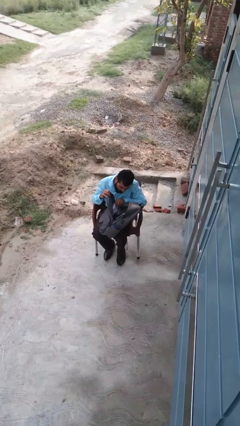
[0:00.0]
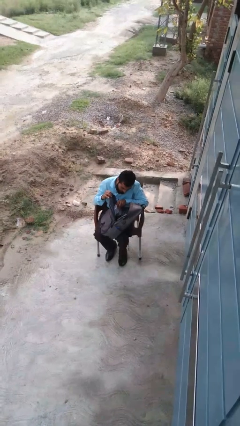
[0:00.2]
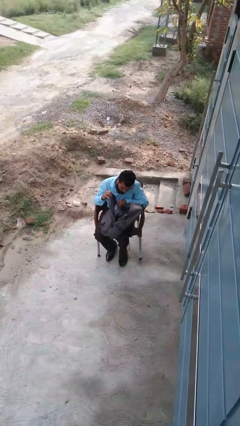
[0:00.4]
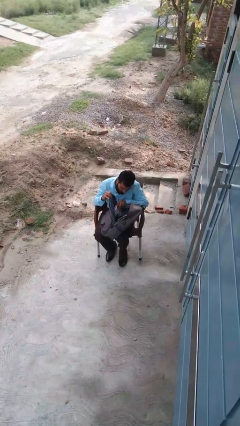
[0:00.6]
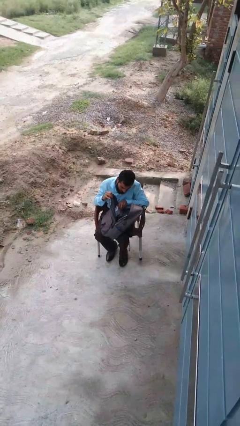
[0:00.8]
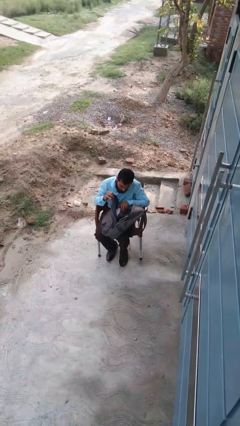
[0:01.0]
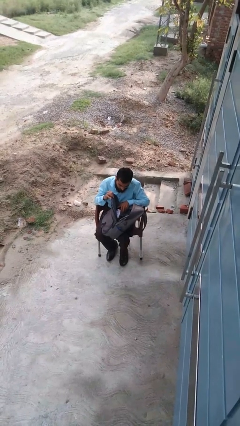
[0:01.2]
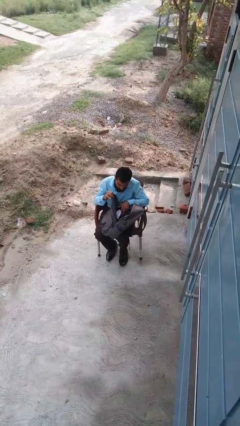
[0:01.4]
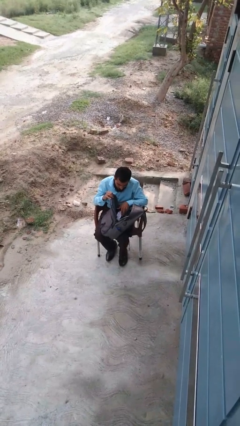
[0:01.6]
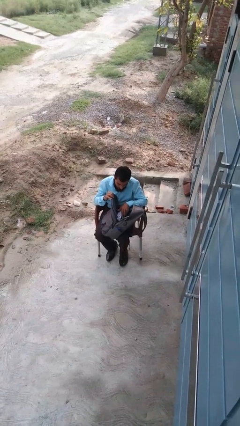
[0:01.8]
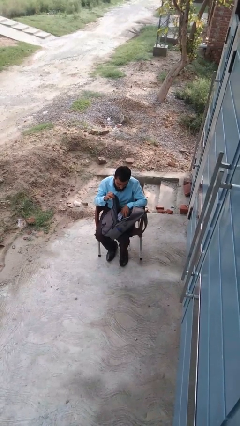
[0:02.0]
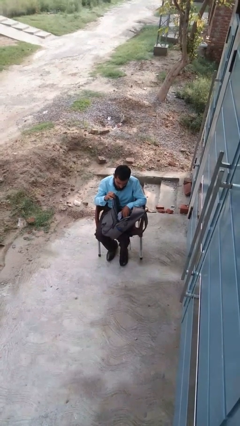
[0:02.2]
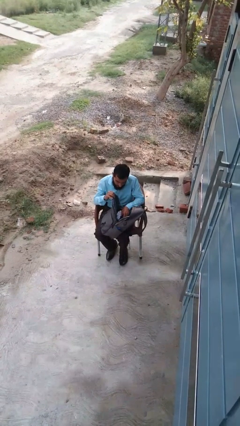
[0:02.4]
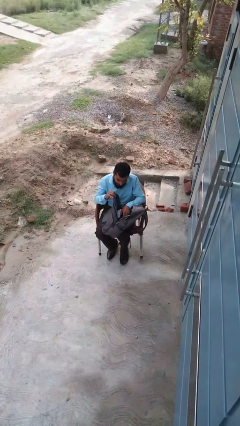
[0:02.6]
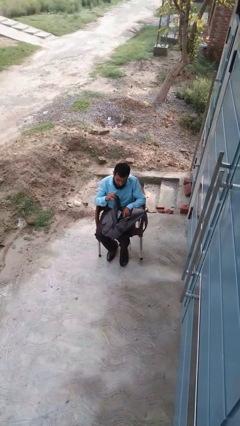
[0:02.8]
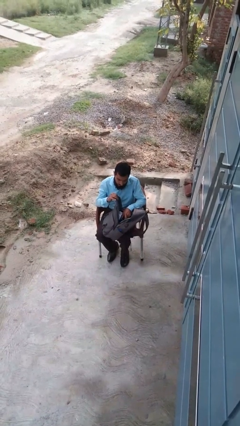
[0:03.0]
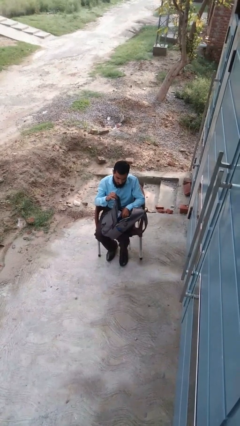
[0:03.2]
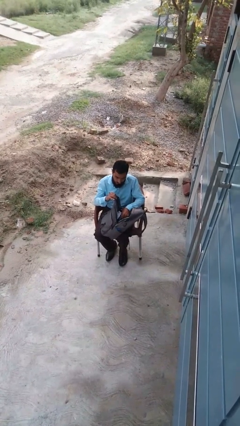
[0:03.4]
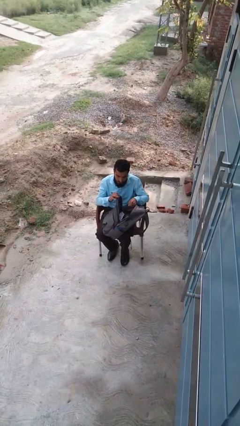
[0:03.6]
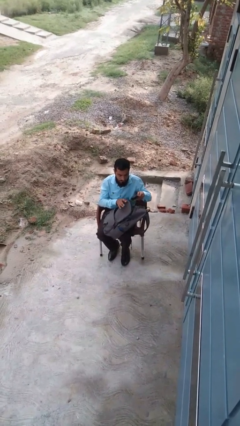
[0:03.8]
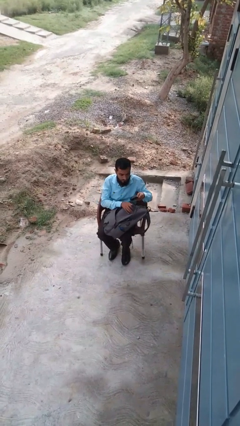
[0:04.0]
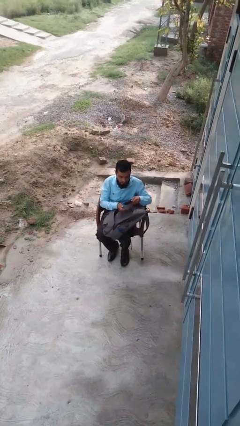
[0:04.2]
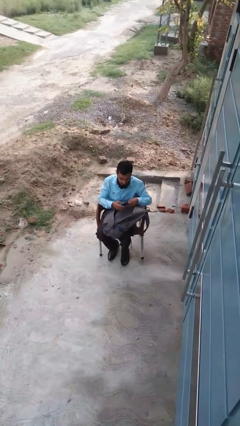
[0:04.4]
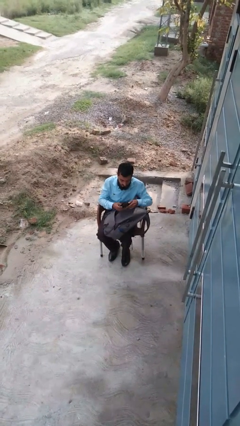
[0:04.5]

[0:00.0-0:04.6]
person takes object from backpack

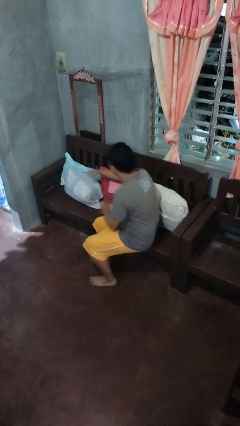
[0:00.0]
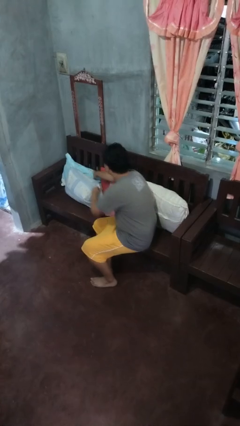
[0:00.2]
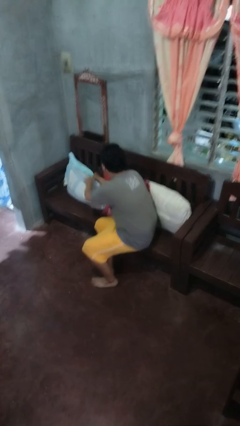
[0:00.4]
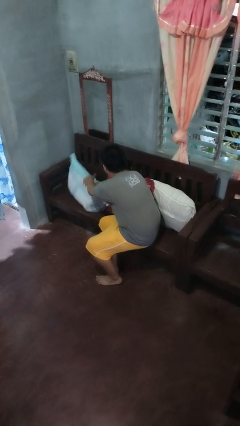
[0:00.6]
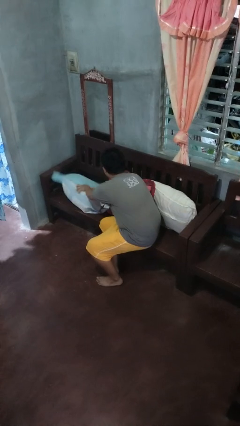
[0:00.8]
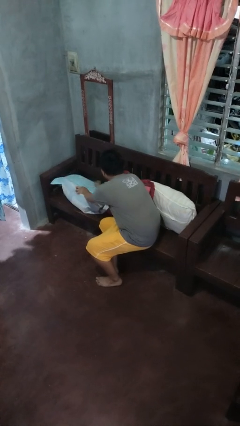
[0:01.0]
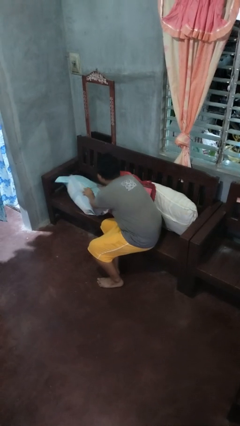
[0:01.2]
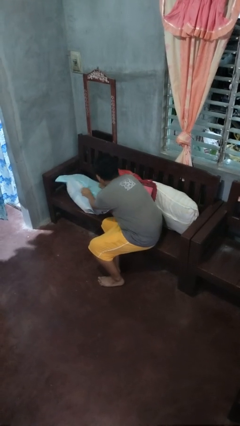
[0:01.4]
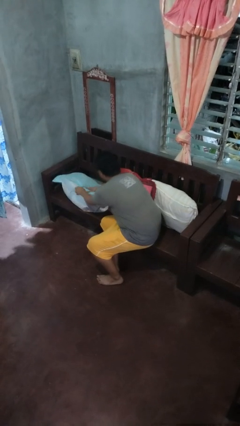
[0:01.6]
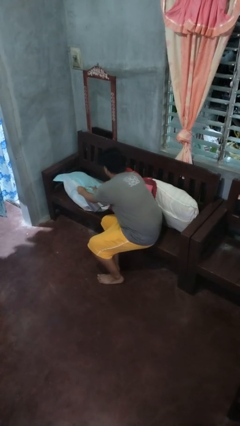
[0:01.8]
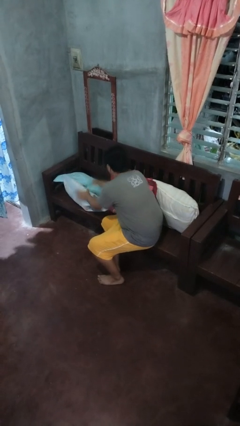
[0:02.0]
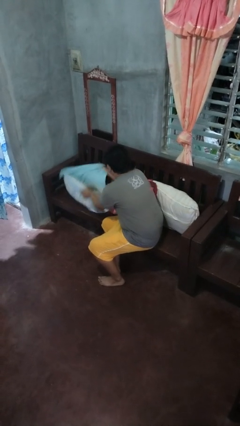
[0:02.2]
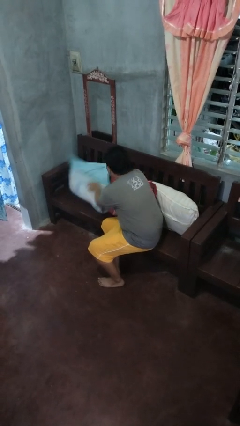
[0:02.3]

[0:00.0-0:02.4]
person searches in couch

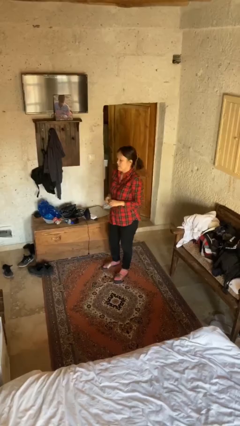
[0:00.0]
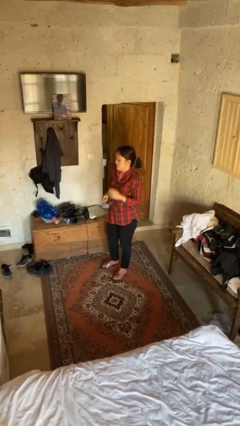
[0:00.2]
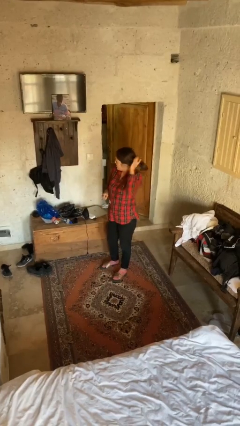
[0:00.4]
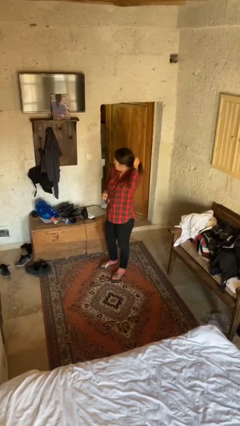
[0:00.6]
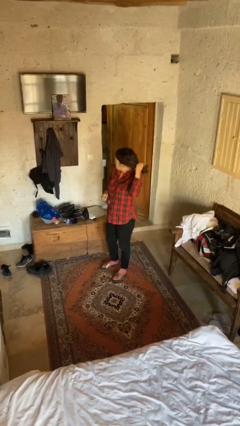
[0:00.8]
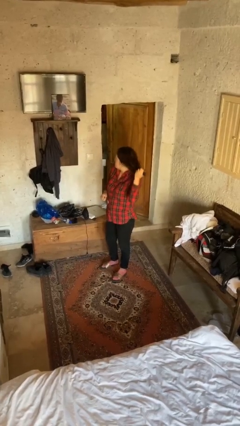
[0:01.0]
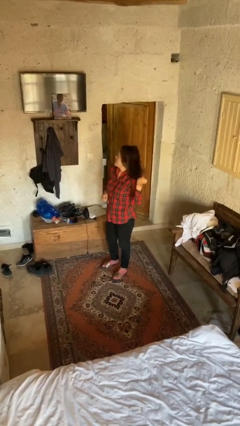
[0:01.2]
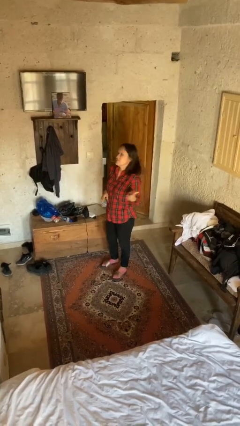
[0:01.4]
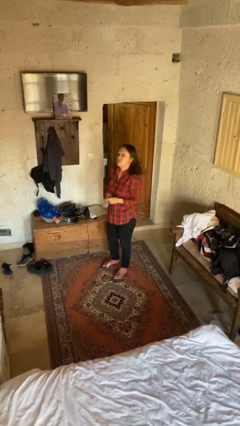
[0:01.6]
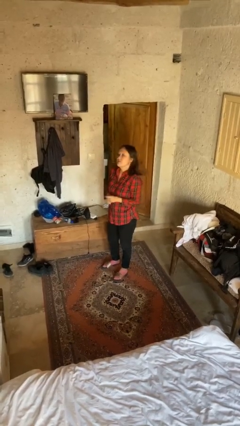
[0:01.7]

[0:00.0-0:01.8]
person takes off hairtie

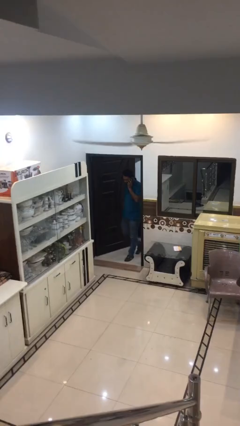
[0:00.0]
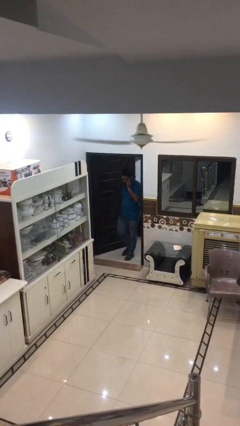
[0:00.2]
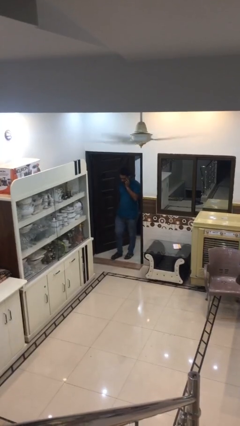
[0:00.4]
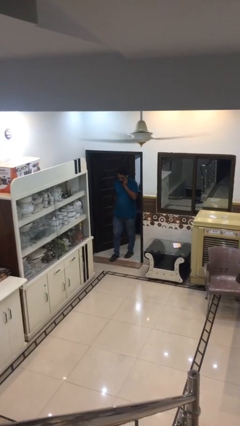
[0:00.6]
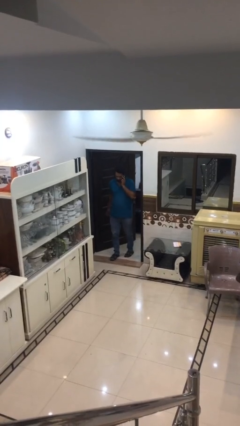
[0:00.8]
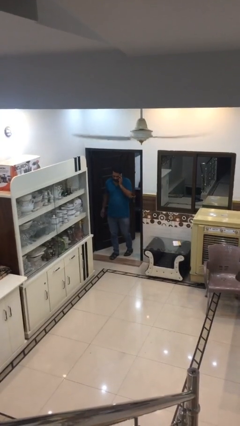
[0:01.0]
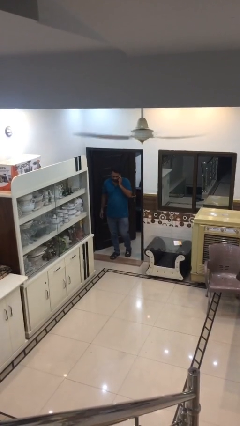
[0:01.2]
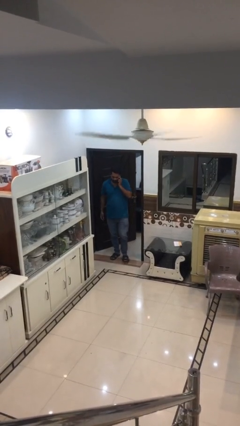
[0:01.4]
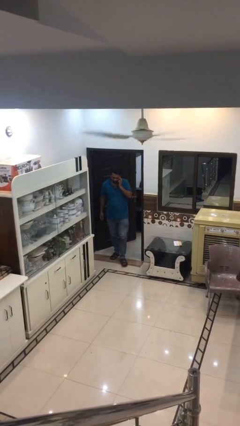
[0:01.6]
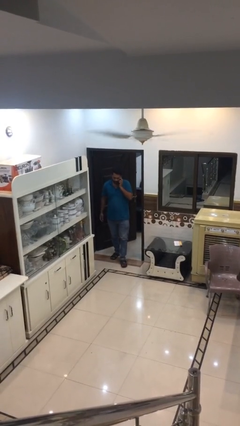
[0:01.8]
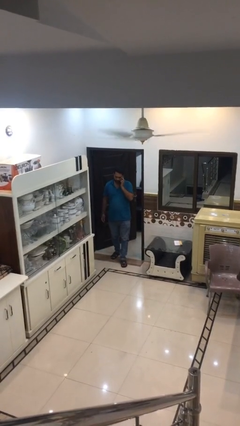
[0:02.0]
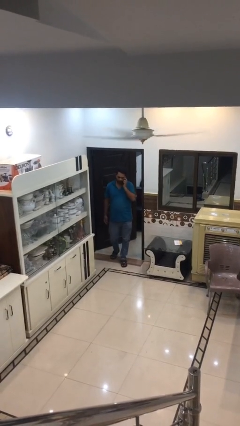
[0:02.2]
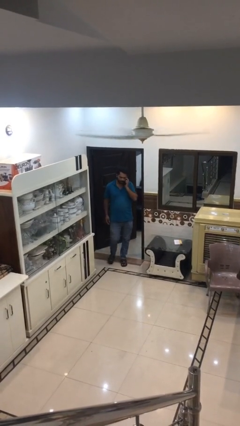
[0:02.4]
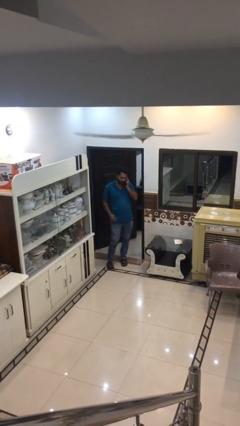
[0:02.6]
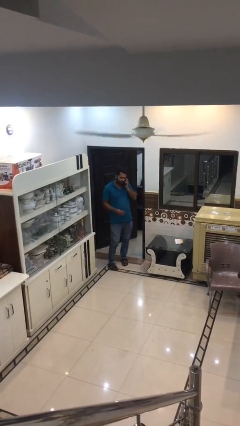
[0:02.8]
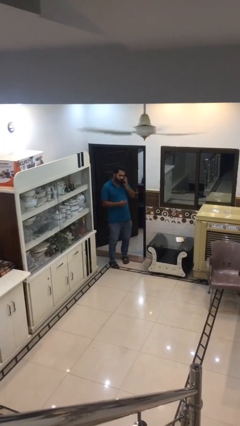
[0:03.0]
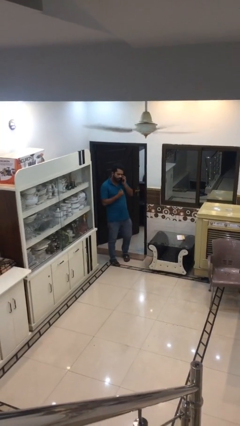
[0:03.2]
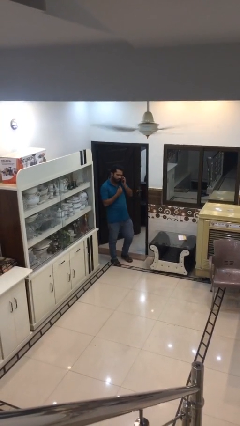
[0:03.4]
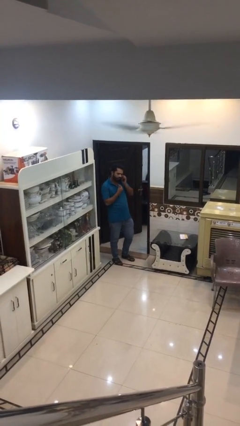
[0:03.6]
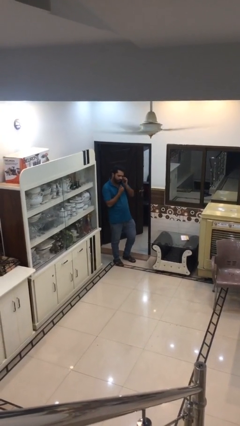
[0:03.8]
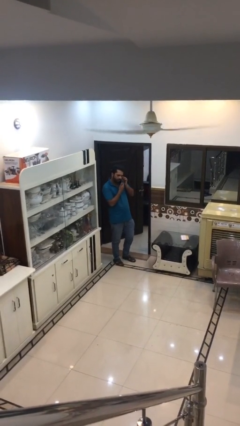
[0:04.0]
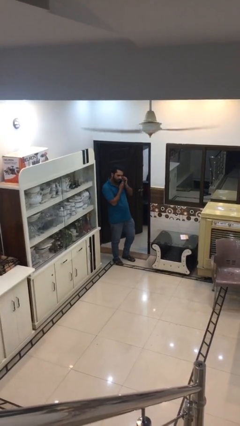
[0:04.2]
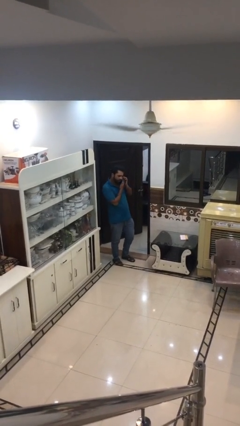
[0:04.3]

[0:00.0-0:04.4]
person enters scene through structure

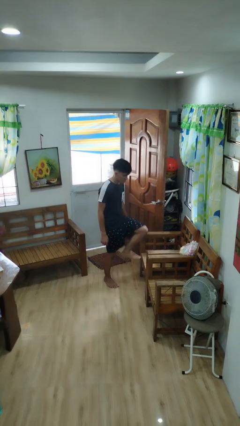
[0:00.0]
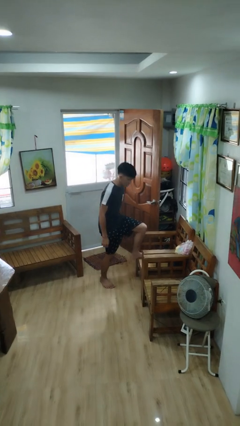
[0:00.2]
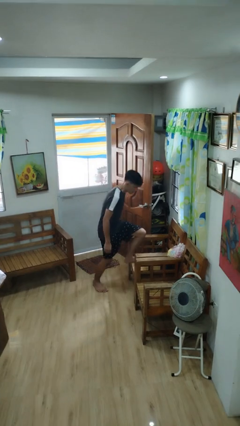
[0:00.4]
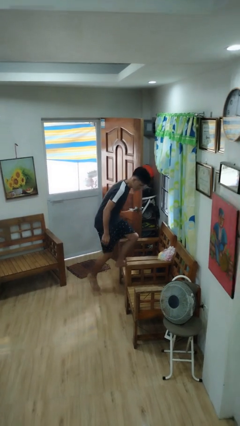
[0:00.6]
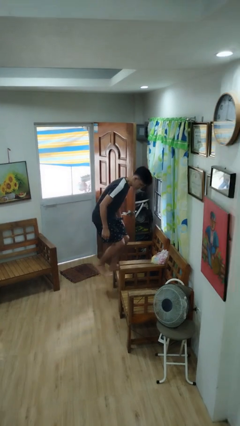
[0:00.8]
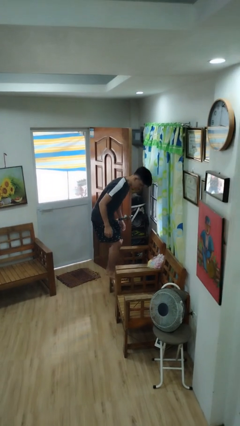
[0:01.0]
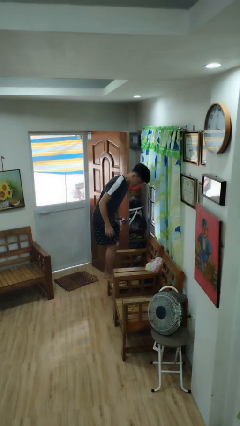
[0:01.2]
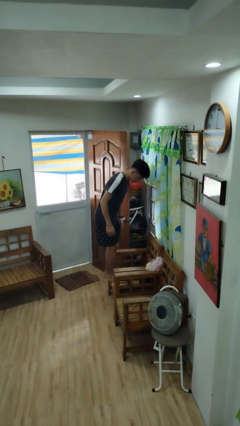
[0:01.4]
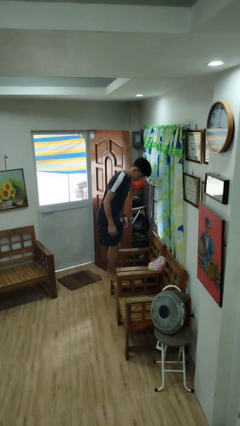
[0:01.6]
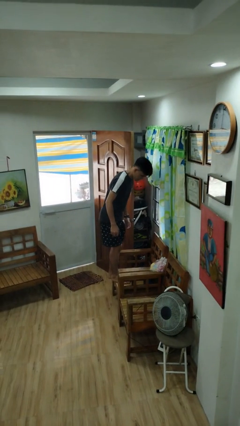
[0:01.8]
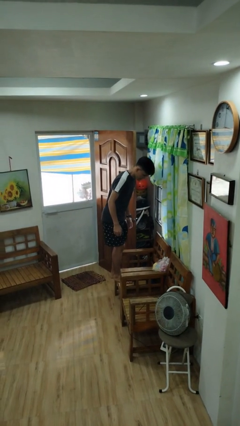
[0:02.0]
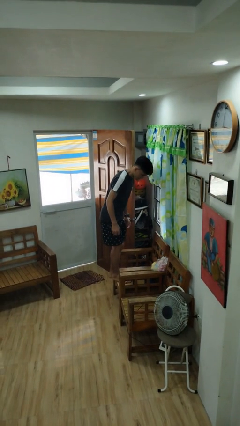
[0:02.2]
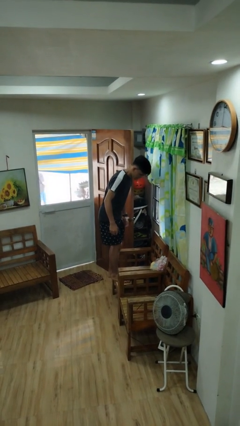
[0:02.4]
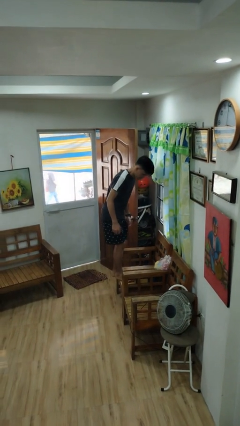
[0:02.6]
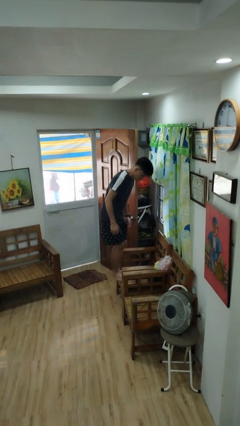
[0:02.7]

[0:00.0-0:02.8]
person climbs on chair

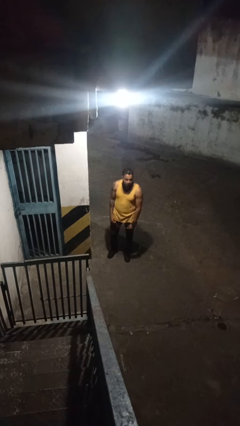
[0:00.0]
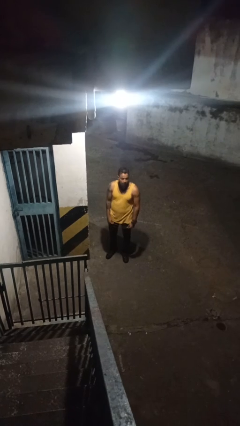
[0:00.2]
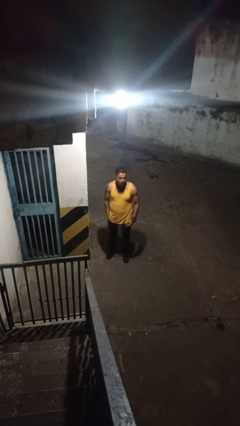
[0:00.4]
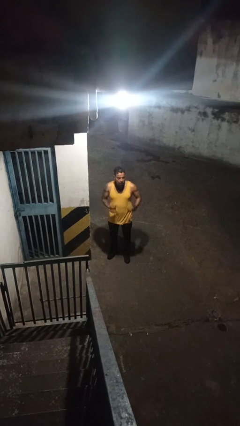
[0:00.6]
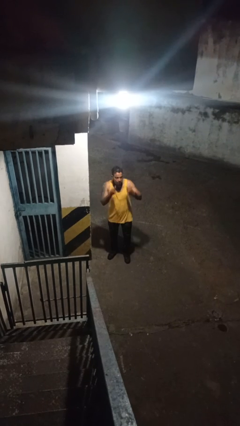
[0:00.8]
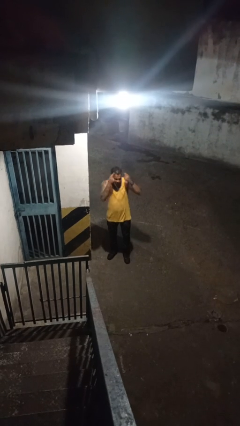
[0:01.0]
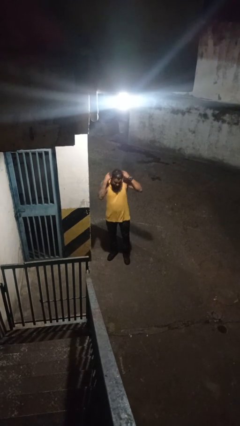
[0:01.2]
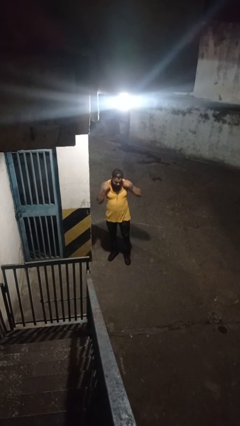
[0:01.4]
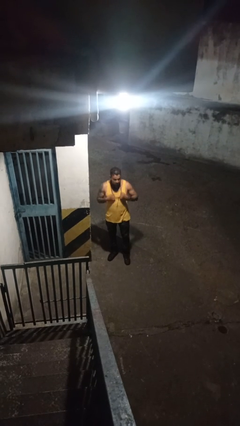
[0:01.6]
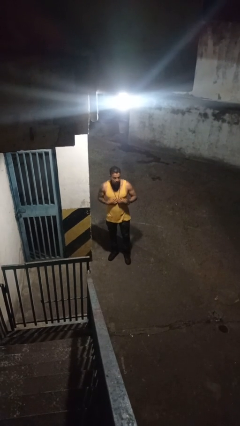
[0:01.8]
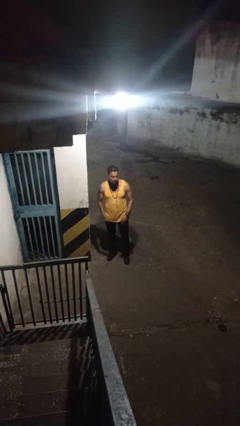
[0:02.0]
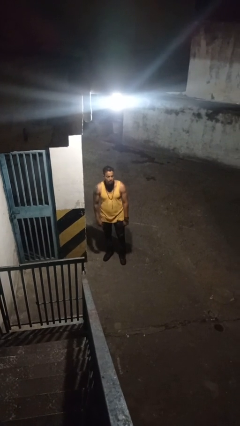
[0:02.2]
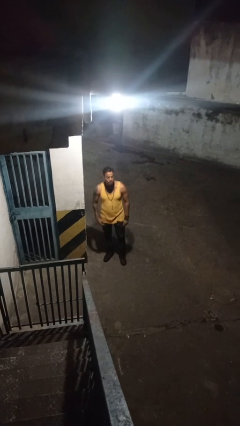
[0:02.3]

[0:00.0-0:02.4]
person puts on necklace
